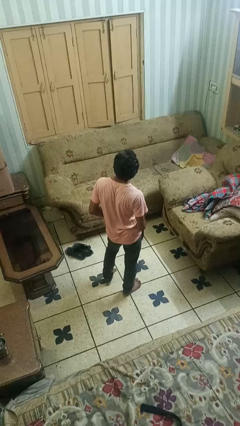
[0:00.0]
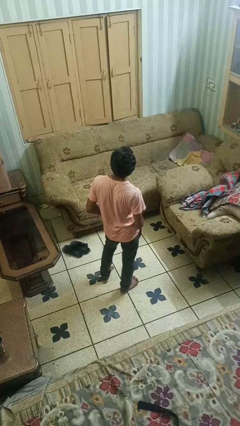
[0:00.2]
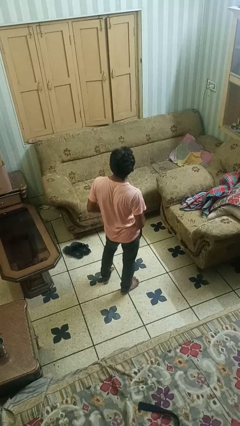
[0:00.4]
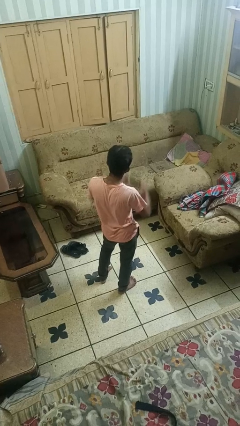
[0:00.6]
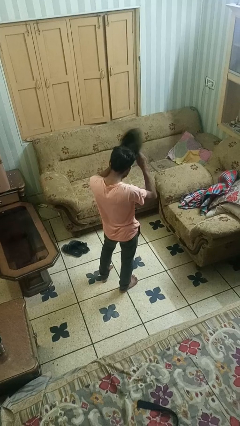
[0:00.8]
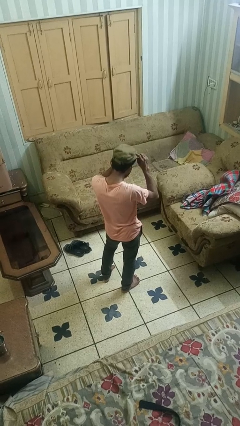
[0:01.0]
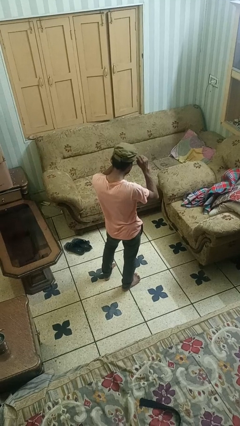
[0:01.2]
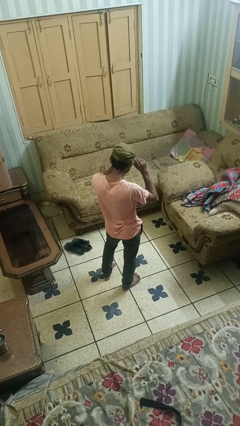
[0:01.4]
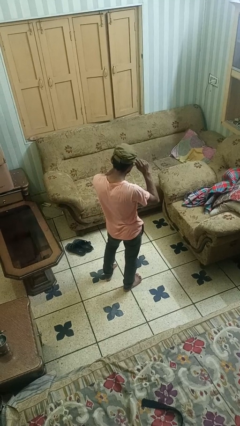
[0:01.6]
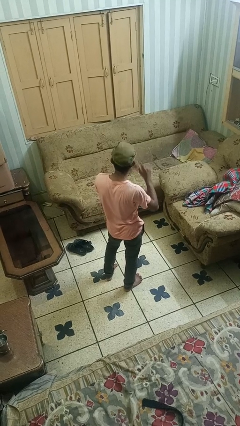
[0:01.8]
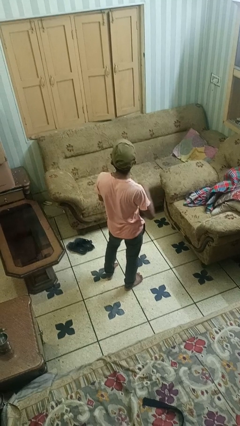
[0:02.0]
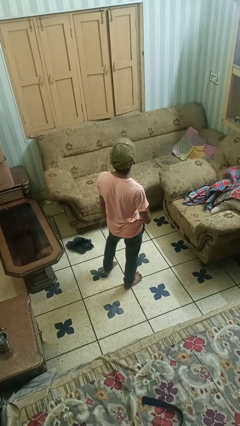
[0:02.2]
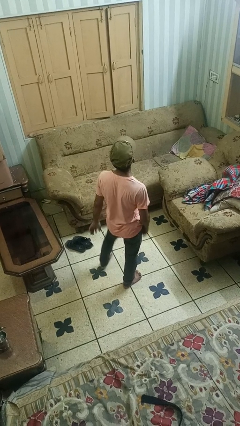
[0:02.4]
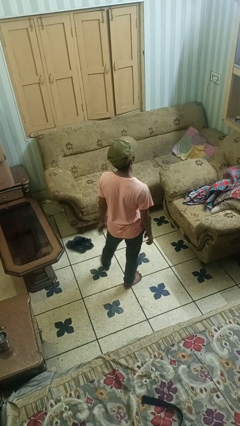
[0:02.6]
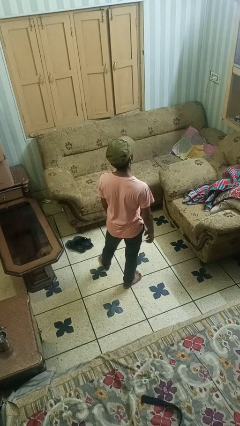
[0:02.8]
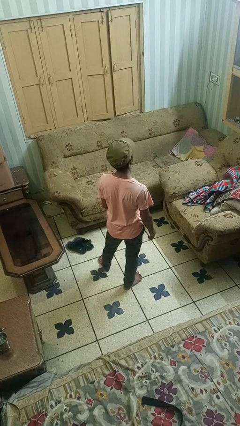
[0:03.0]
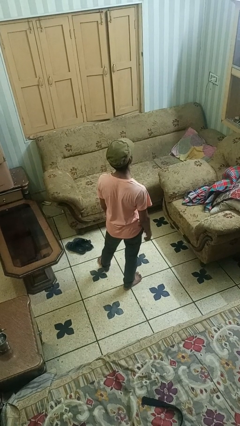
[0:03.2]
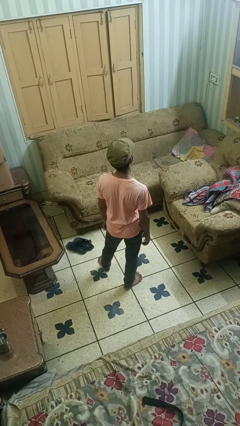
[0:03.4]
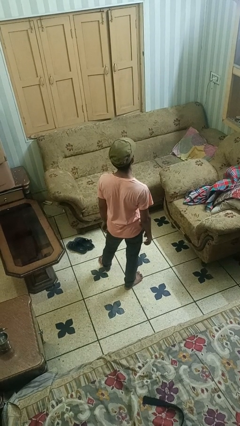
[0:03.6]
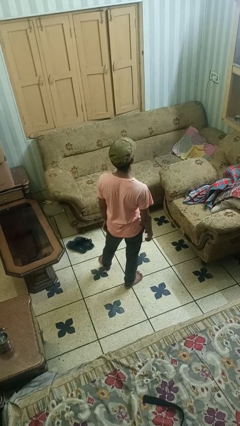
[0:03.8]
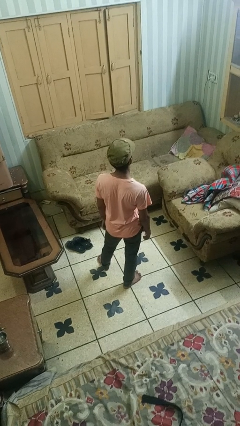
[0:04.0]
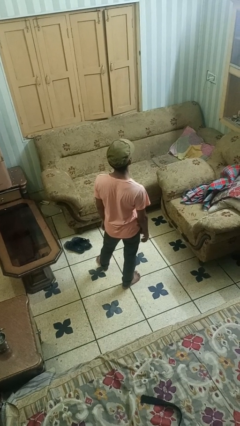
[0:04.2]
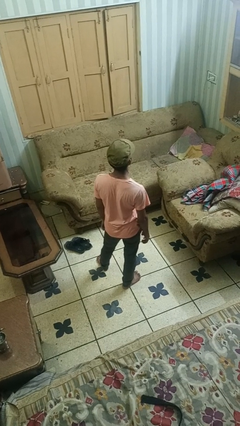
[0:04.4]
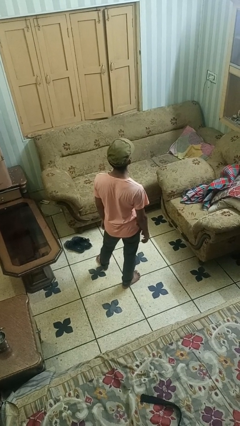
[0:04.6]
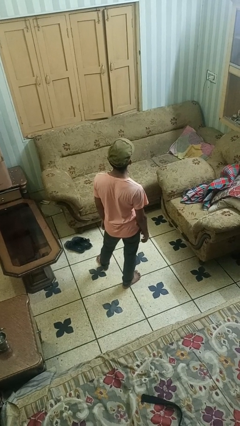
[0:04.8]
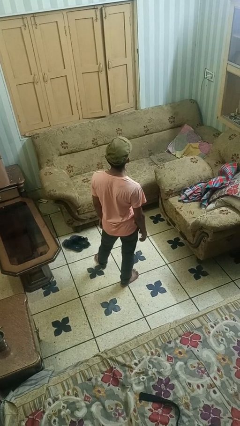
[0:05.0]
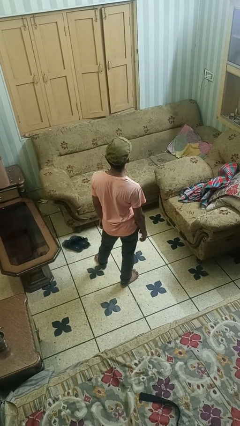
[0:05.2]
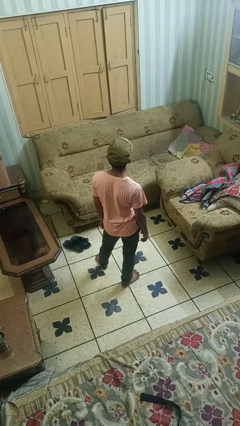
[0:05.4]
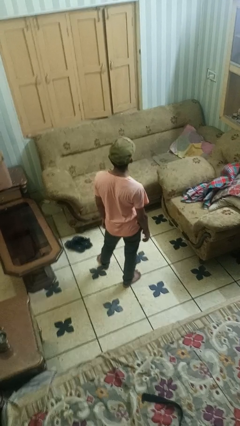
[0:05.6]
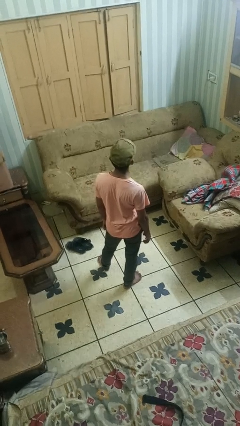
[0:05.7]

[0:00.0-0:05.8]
person puts on hat

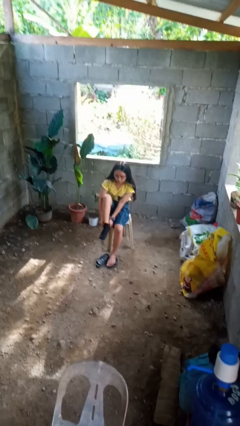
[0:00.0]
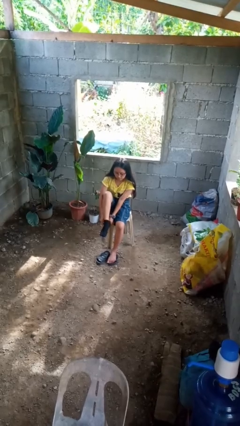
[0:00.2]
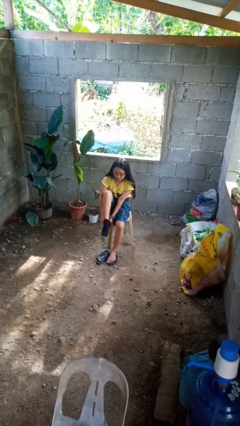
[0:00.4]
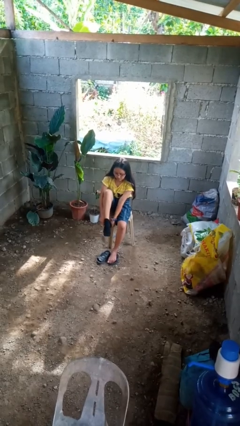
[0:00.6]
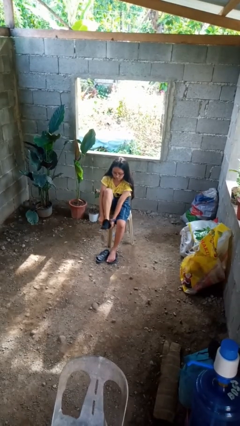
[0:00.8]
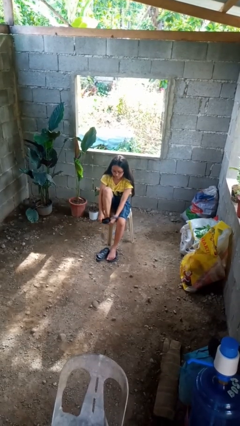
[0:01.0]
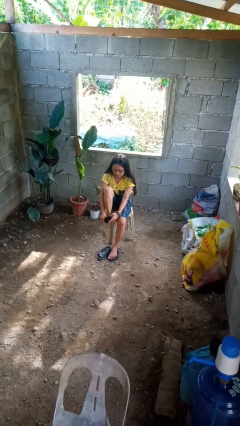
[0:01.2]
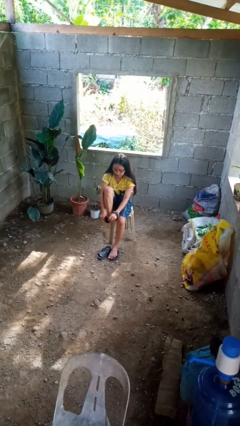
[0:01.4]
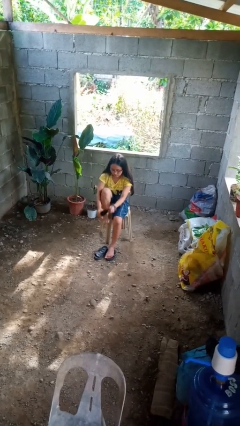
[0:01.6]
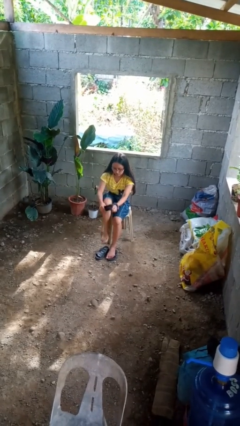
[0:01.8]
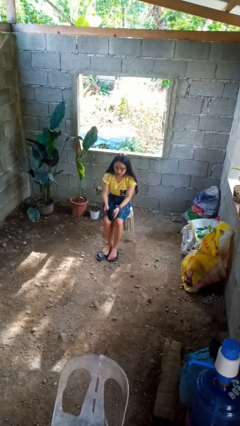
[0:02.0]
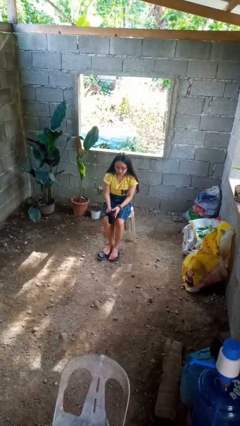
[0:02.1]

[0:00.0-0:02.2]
person takes off socks

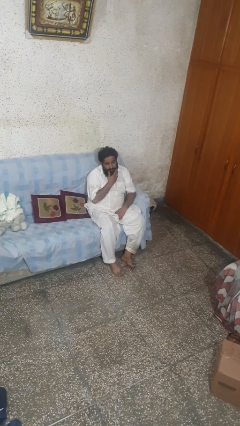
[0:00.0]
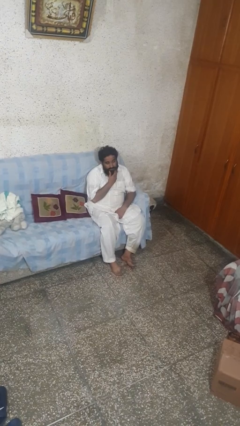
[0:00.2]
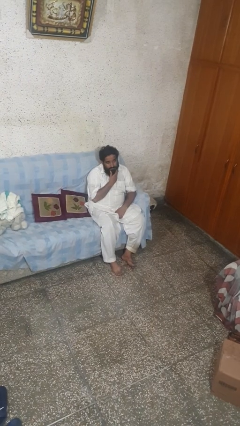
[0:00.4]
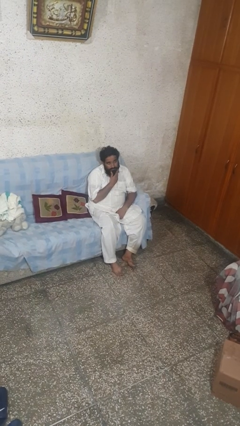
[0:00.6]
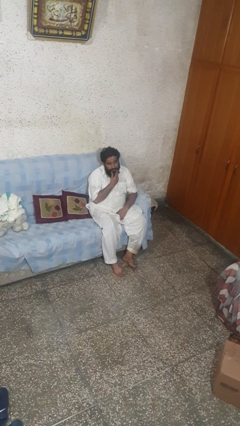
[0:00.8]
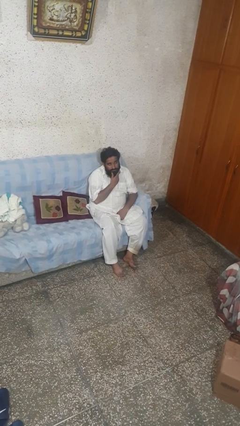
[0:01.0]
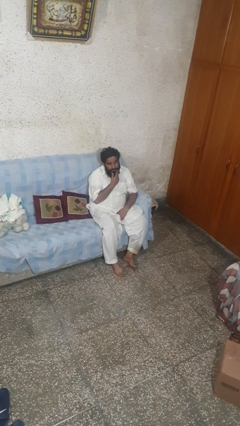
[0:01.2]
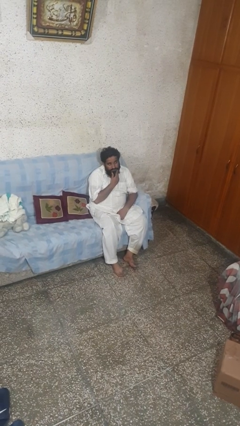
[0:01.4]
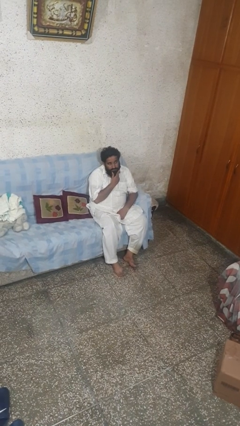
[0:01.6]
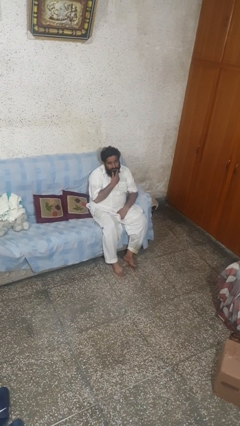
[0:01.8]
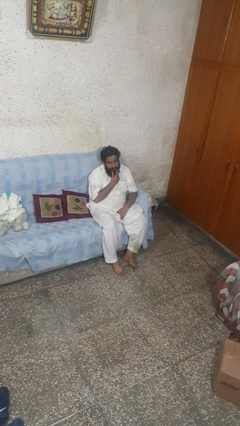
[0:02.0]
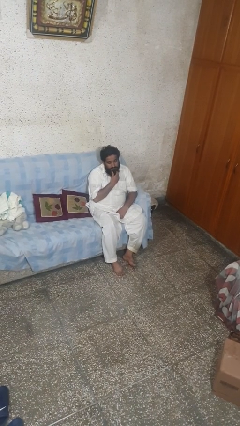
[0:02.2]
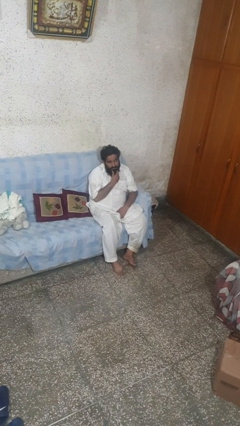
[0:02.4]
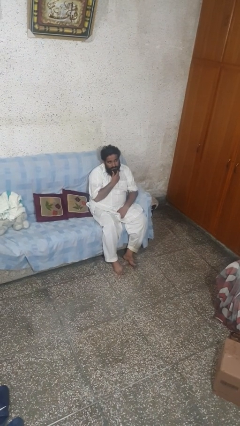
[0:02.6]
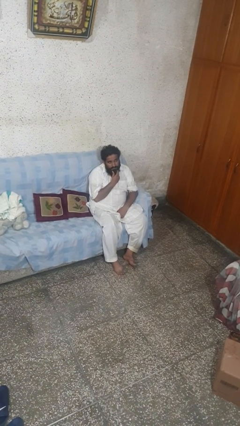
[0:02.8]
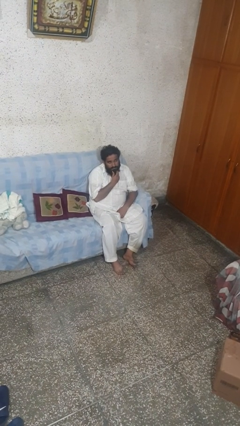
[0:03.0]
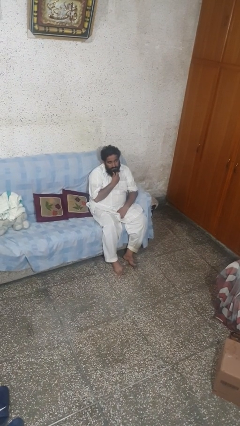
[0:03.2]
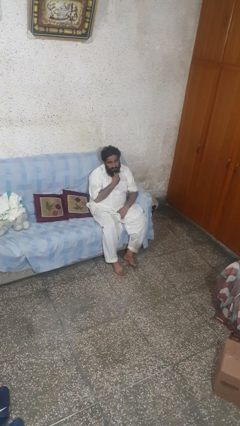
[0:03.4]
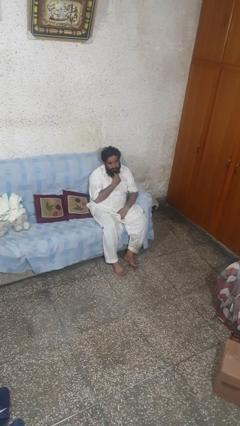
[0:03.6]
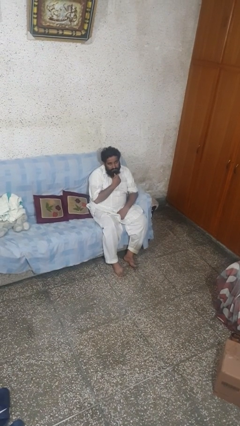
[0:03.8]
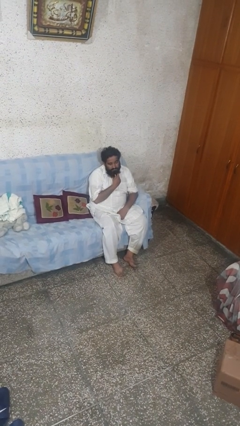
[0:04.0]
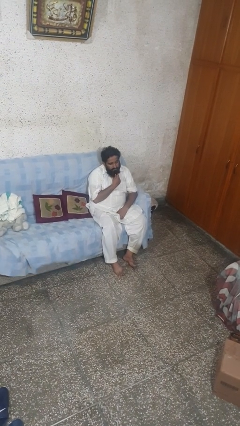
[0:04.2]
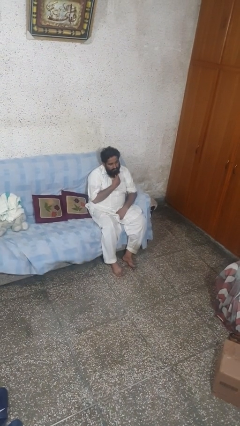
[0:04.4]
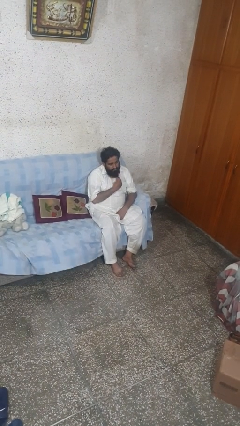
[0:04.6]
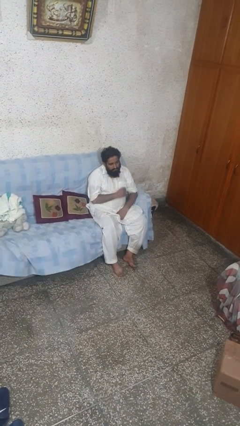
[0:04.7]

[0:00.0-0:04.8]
person strokes chin

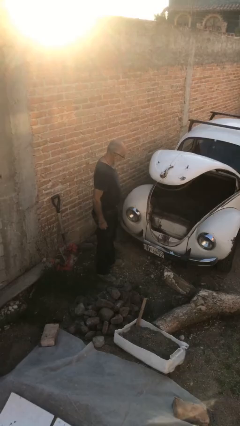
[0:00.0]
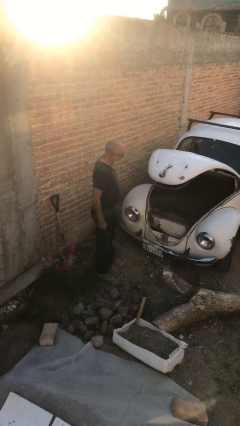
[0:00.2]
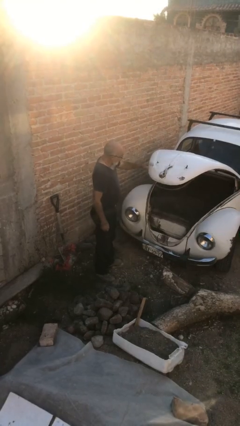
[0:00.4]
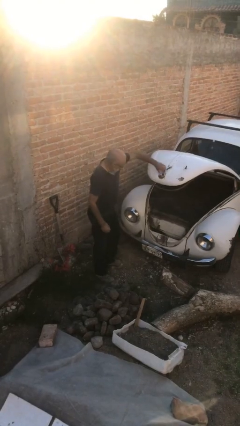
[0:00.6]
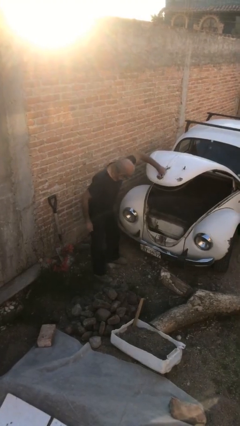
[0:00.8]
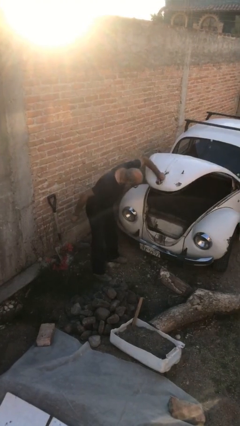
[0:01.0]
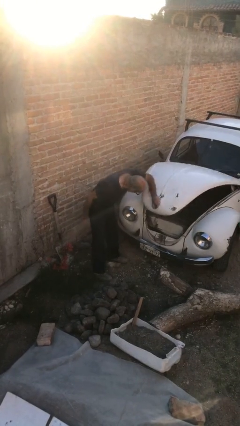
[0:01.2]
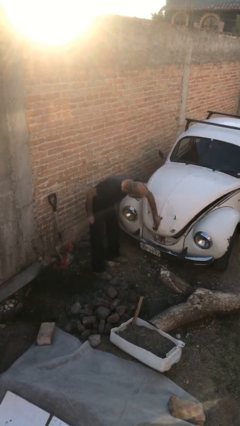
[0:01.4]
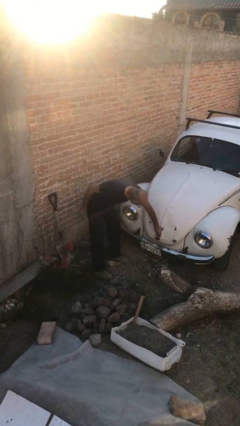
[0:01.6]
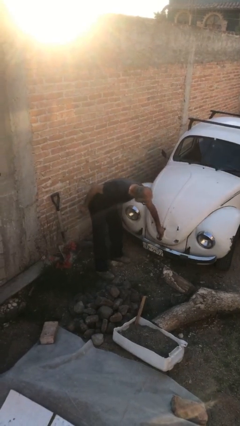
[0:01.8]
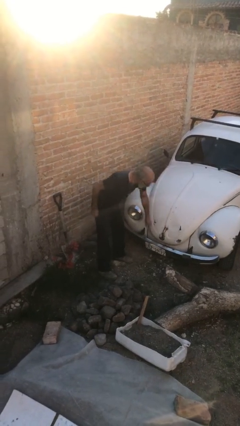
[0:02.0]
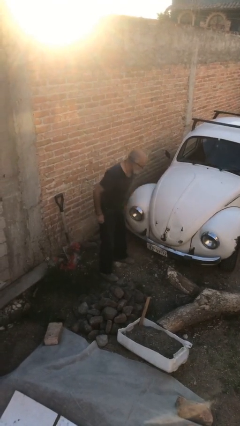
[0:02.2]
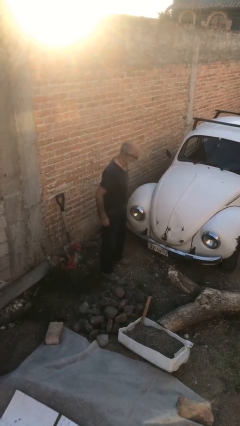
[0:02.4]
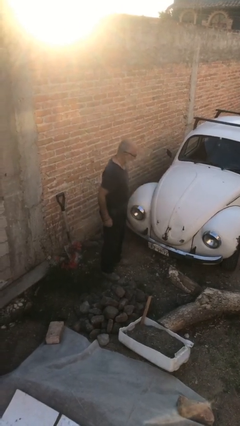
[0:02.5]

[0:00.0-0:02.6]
person closes car trunk

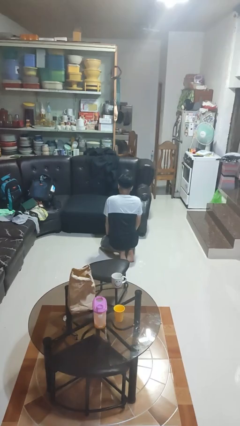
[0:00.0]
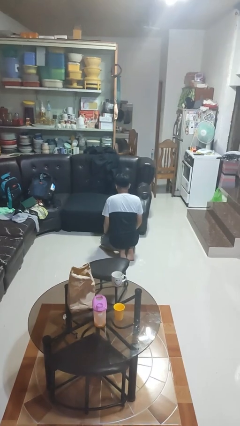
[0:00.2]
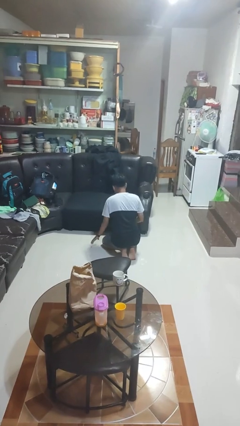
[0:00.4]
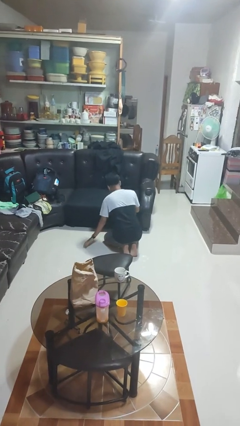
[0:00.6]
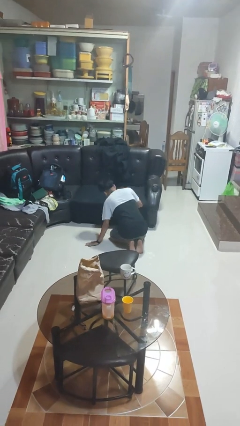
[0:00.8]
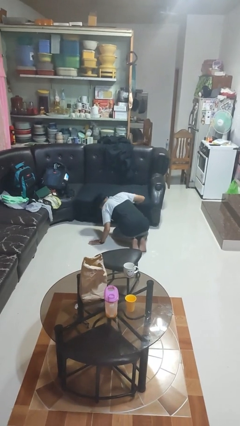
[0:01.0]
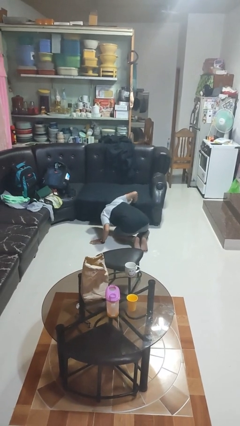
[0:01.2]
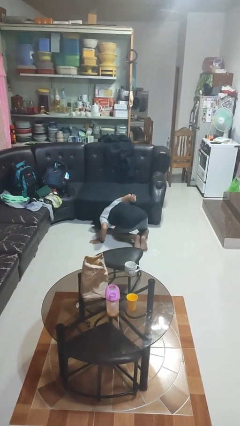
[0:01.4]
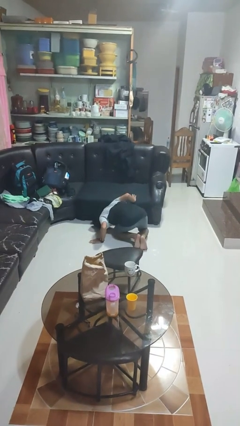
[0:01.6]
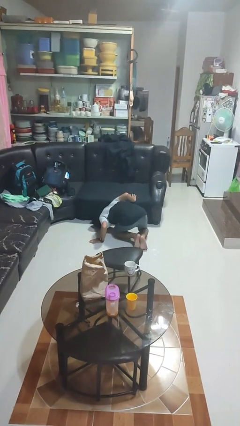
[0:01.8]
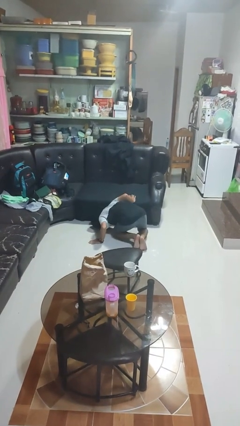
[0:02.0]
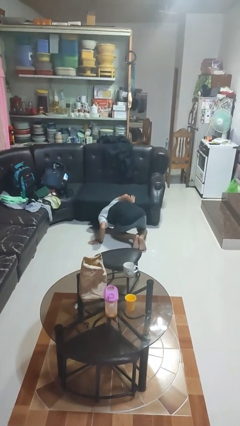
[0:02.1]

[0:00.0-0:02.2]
person searches under couch
